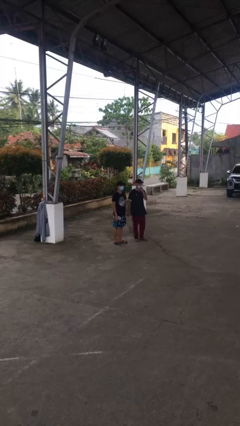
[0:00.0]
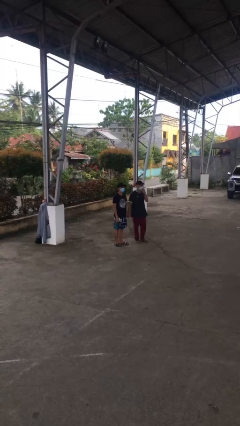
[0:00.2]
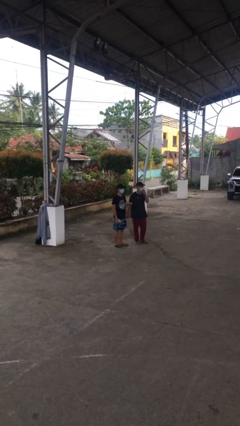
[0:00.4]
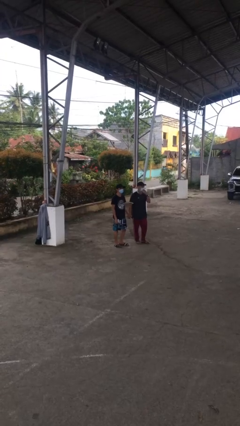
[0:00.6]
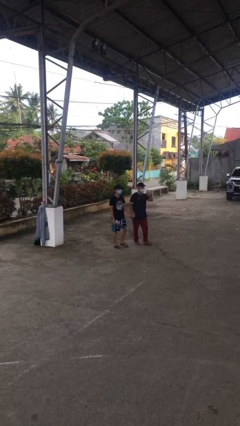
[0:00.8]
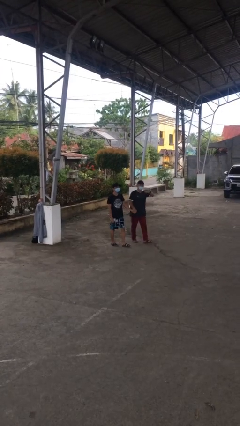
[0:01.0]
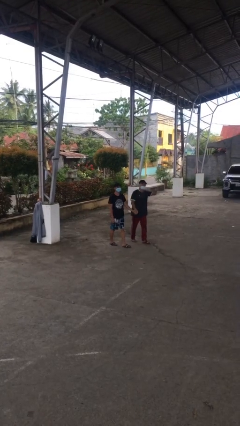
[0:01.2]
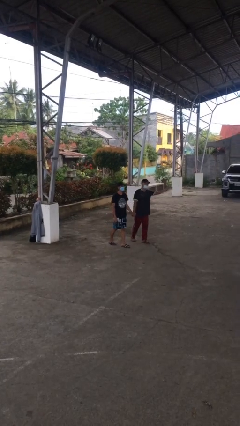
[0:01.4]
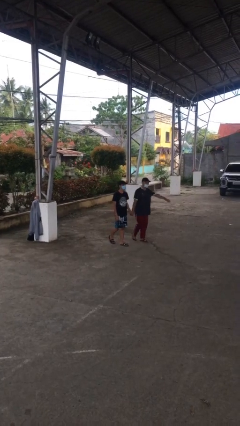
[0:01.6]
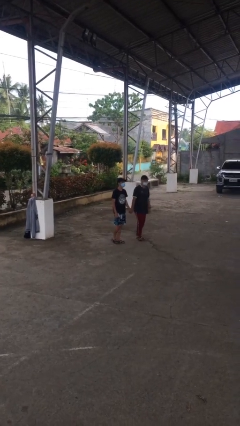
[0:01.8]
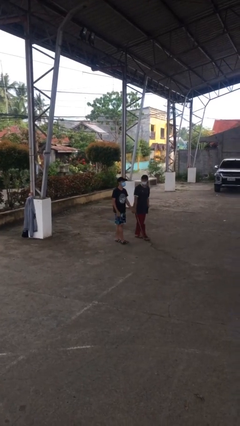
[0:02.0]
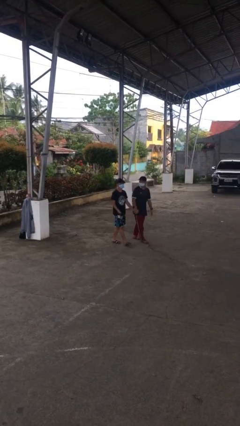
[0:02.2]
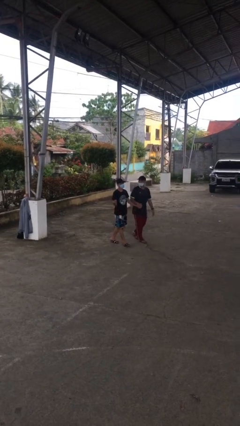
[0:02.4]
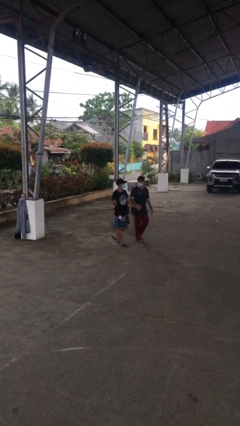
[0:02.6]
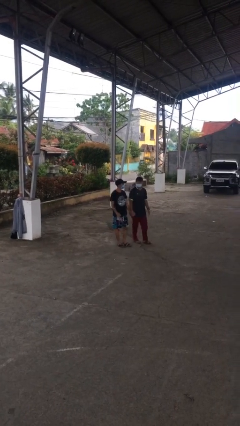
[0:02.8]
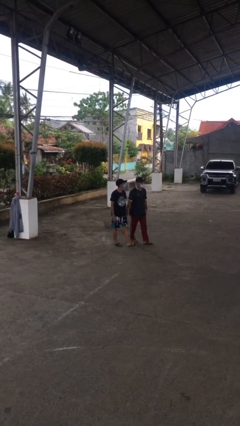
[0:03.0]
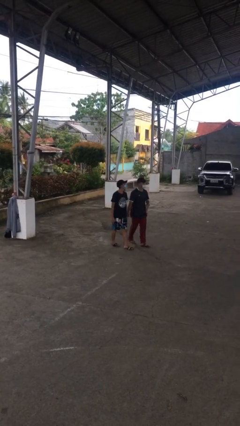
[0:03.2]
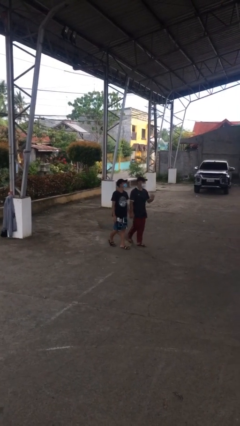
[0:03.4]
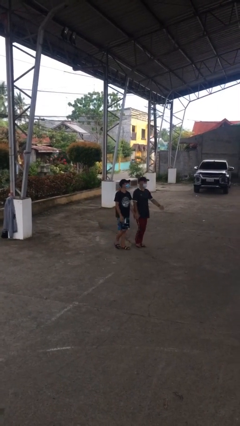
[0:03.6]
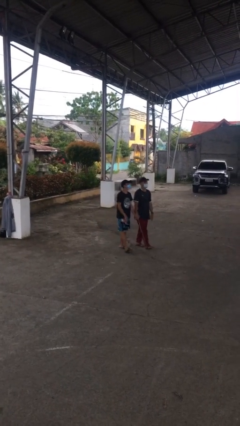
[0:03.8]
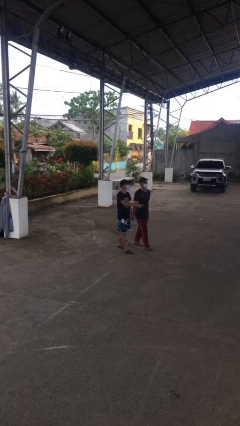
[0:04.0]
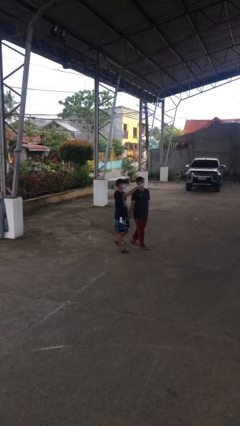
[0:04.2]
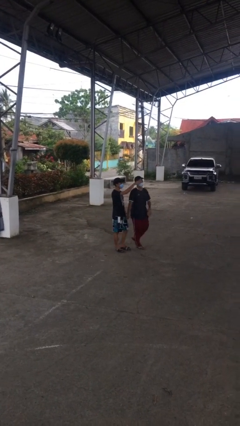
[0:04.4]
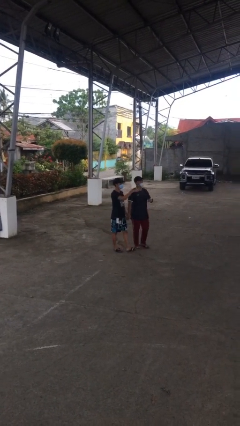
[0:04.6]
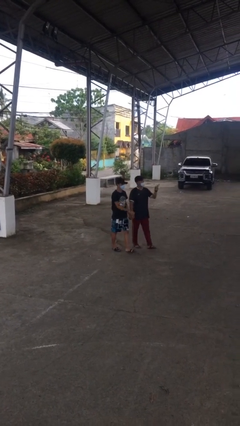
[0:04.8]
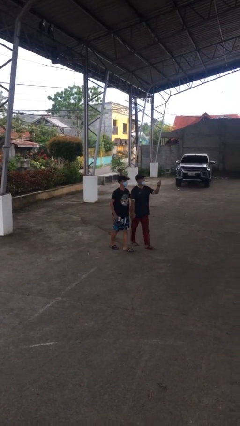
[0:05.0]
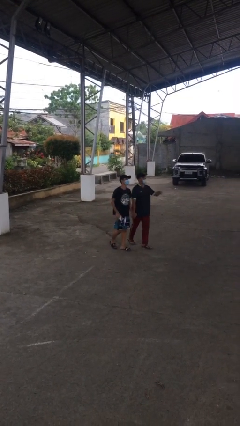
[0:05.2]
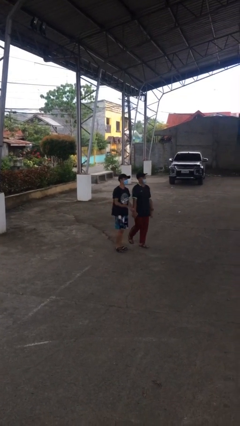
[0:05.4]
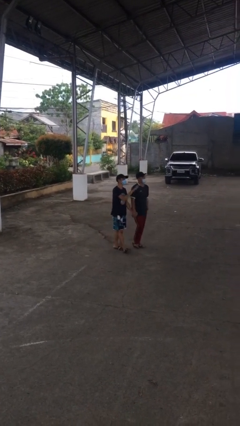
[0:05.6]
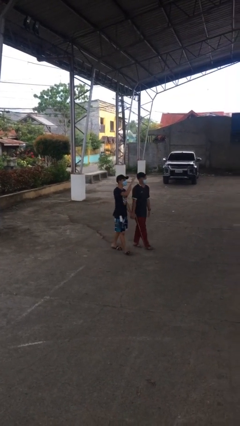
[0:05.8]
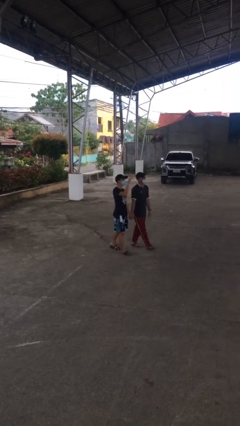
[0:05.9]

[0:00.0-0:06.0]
person holds hand

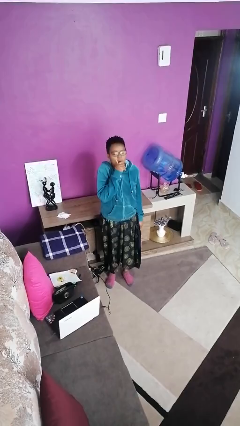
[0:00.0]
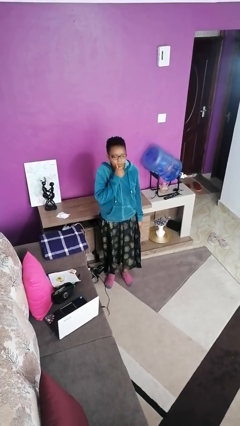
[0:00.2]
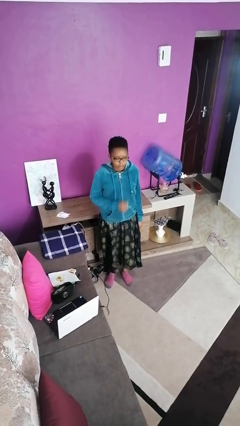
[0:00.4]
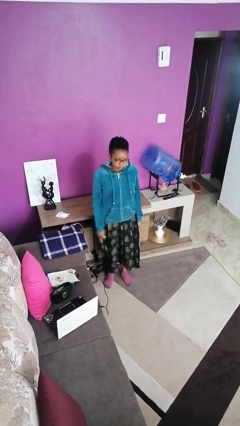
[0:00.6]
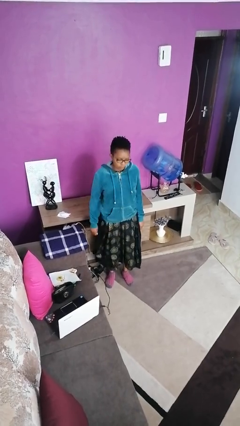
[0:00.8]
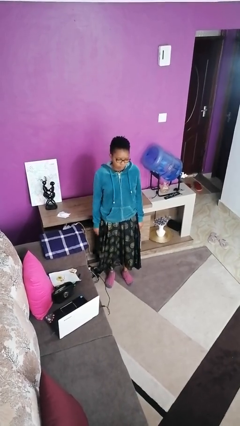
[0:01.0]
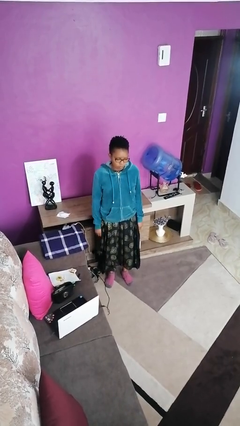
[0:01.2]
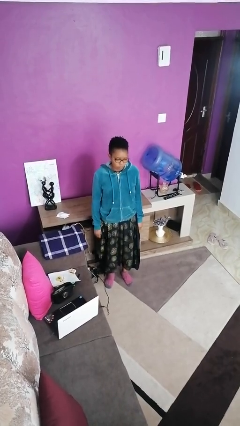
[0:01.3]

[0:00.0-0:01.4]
person closes cabinet

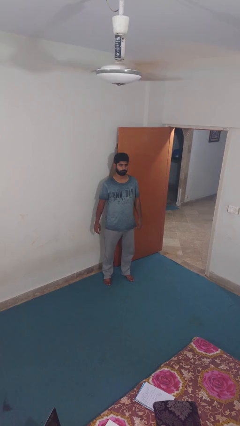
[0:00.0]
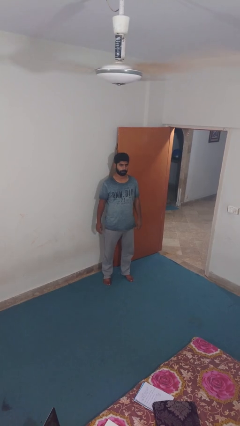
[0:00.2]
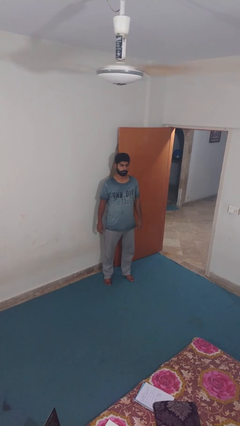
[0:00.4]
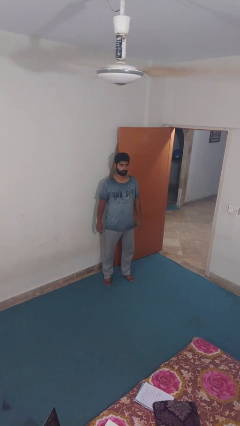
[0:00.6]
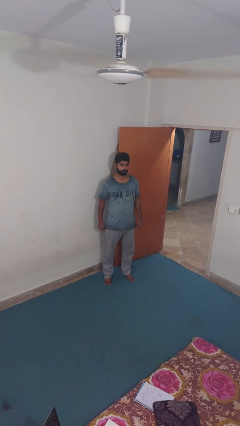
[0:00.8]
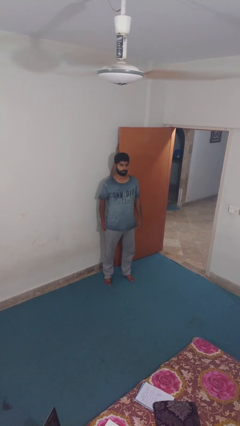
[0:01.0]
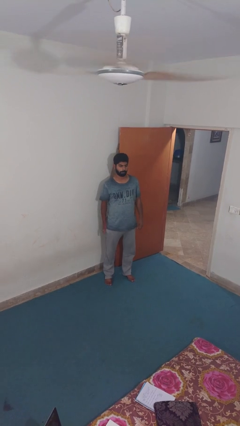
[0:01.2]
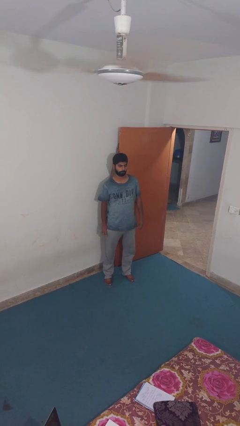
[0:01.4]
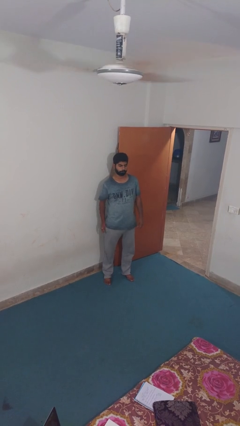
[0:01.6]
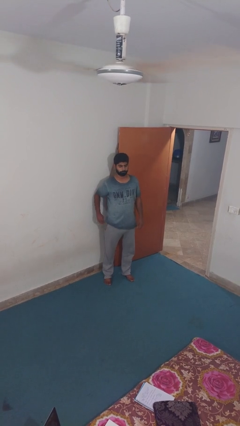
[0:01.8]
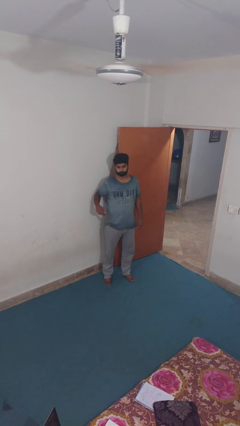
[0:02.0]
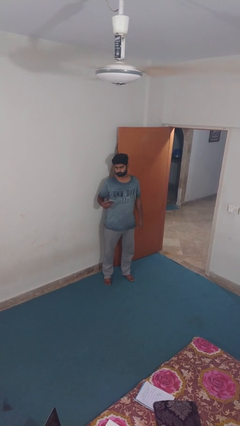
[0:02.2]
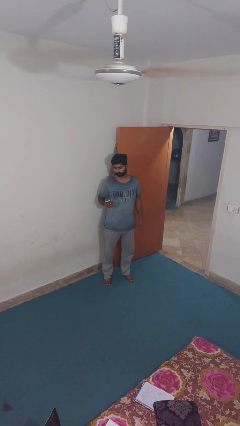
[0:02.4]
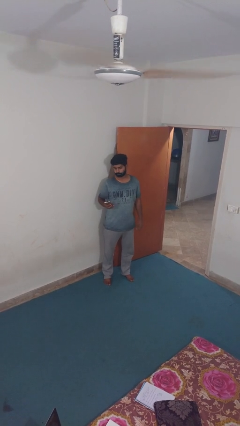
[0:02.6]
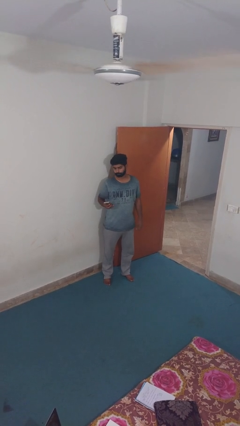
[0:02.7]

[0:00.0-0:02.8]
person takes phone from pocket

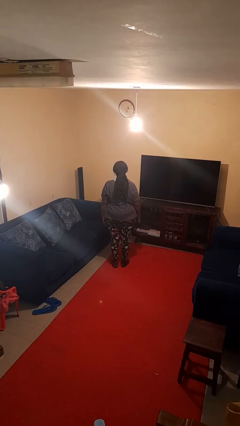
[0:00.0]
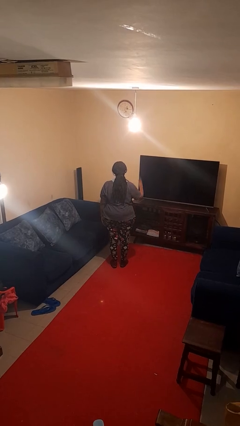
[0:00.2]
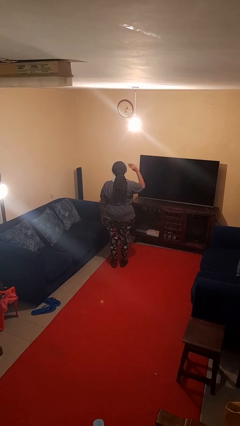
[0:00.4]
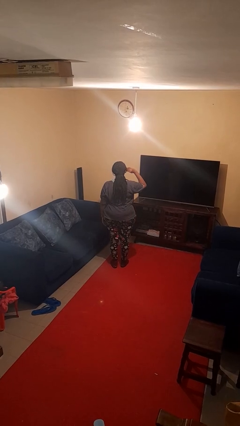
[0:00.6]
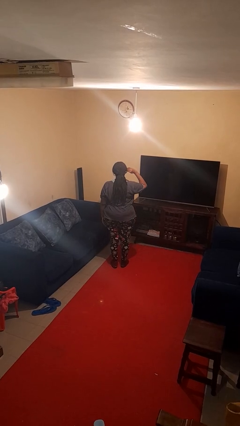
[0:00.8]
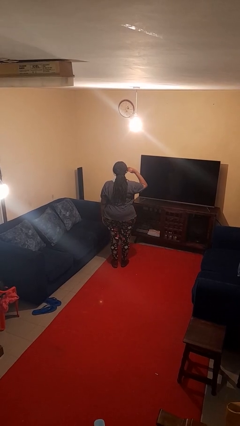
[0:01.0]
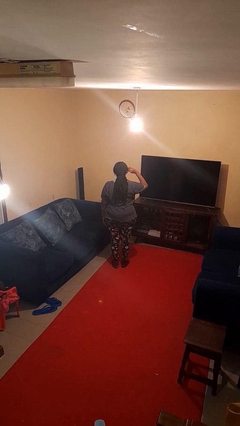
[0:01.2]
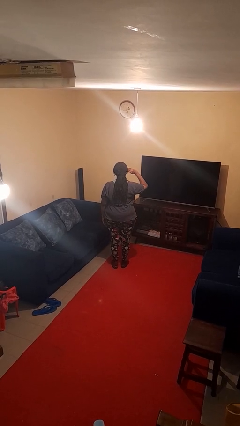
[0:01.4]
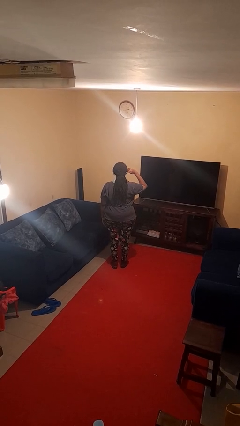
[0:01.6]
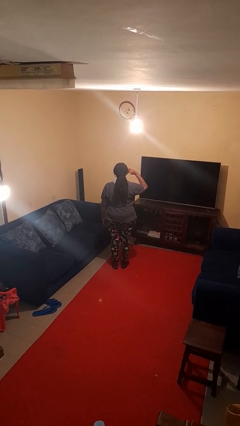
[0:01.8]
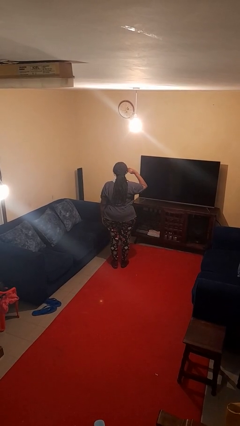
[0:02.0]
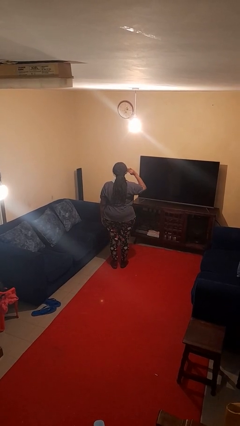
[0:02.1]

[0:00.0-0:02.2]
person salutes

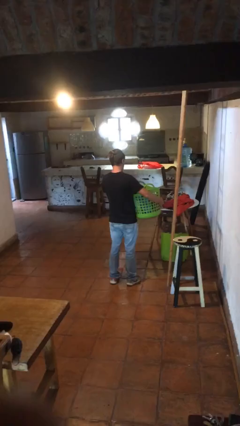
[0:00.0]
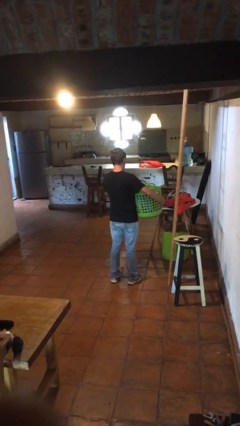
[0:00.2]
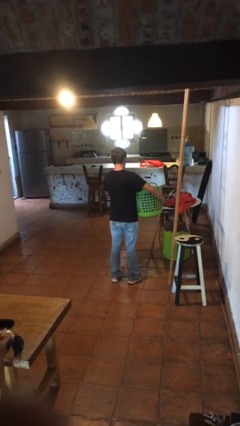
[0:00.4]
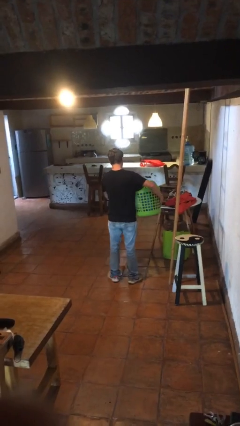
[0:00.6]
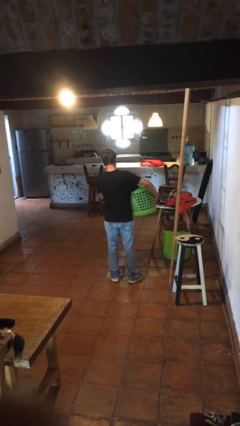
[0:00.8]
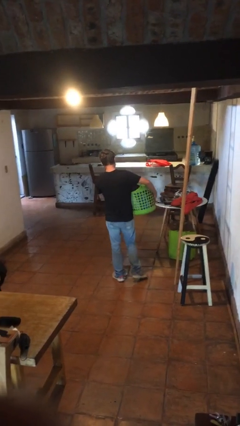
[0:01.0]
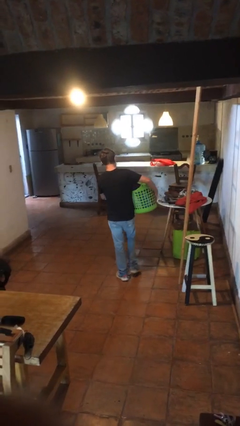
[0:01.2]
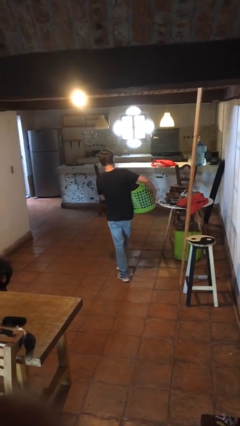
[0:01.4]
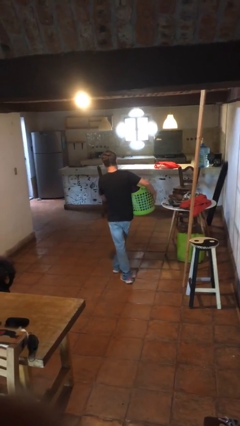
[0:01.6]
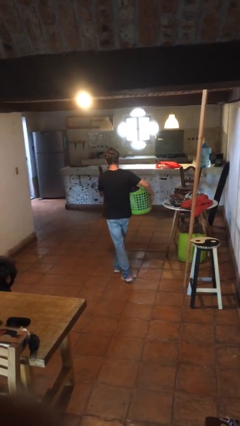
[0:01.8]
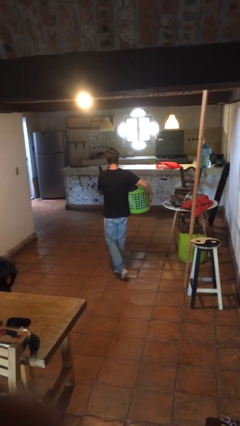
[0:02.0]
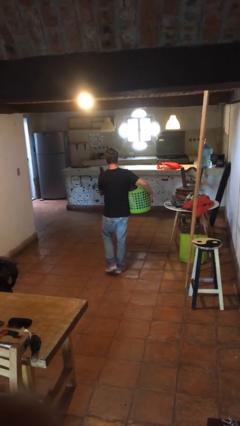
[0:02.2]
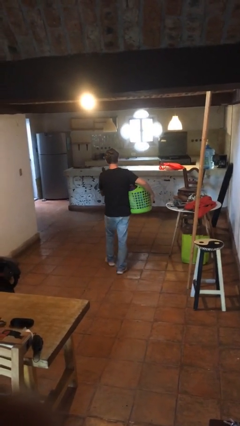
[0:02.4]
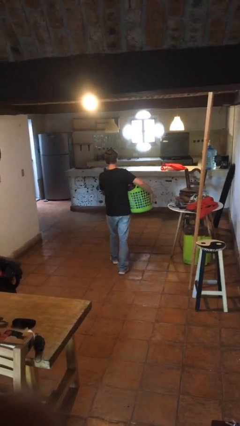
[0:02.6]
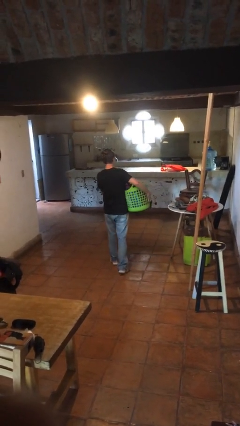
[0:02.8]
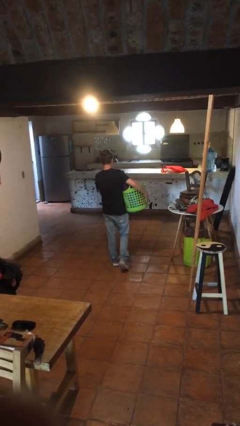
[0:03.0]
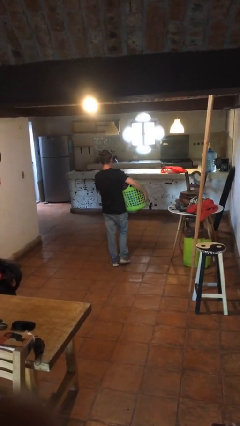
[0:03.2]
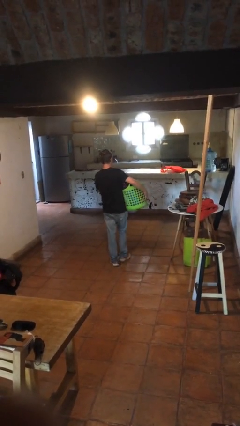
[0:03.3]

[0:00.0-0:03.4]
person carries laundry basket

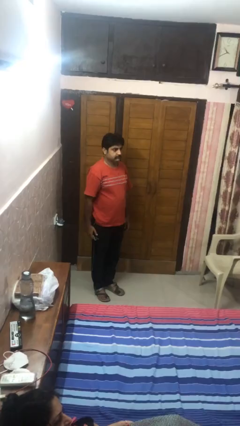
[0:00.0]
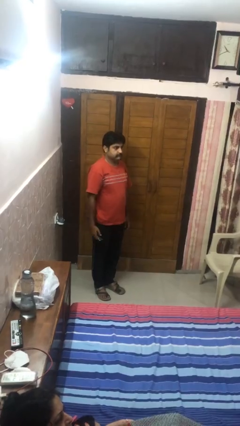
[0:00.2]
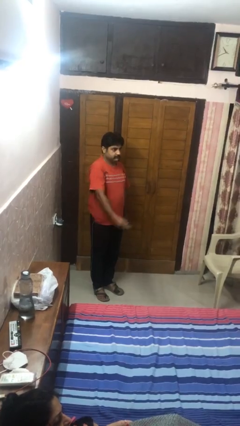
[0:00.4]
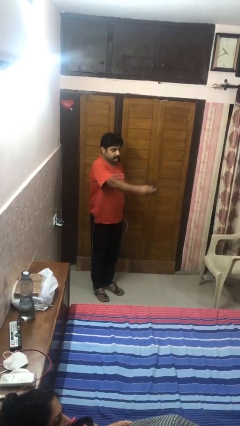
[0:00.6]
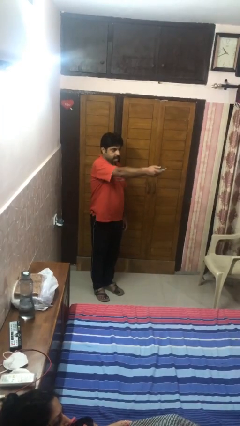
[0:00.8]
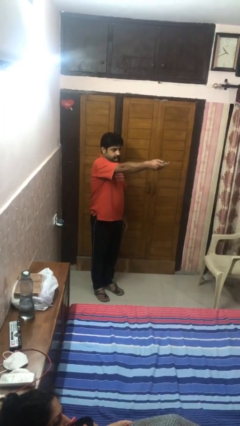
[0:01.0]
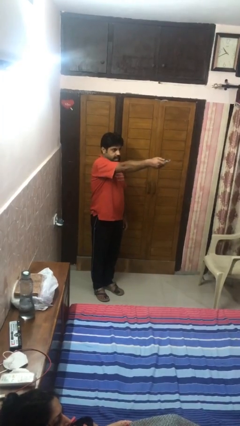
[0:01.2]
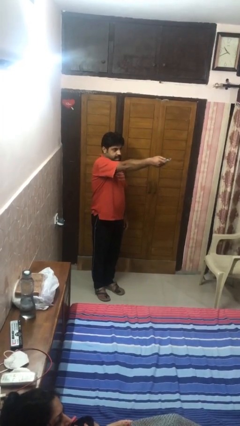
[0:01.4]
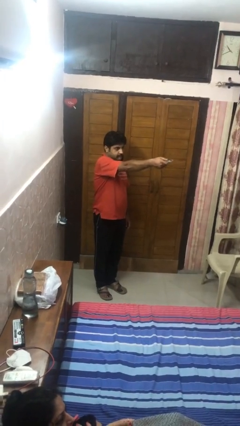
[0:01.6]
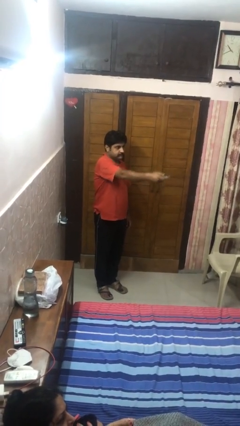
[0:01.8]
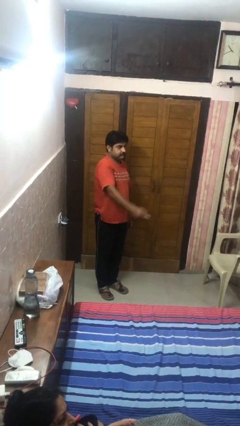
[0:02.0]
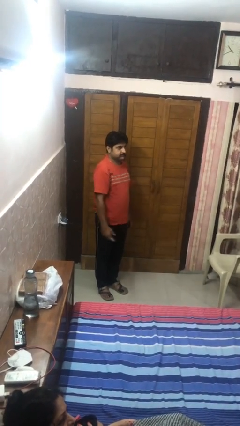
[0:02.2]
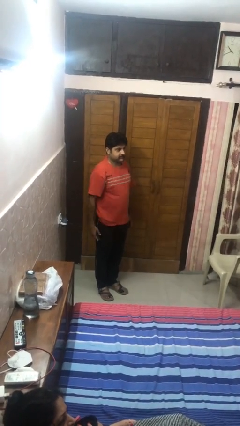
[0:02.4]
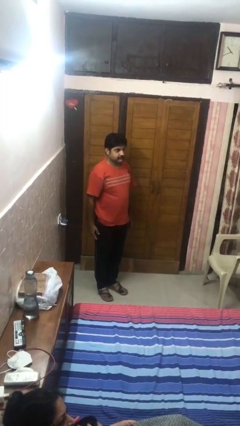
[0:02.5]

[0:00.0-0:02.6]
person uses television remote
